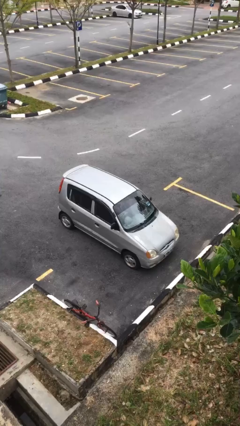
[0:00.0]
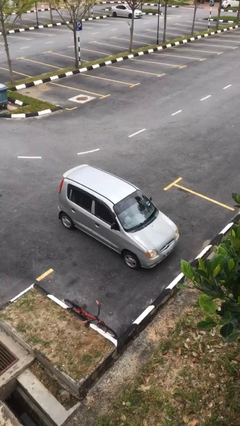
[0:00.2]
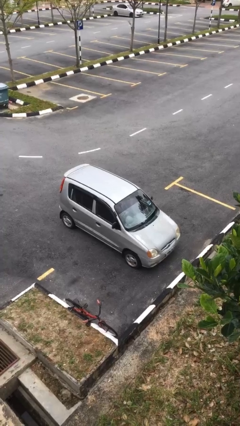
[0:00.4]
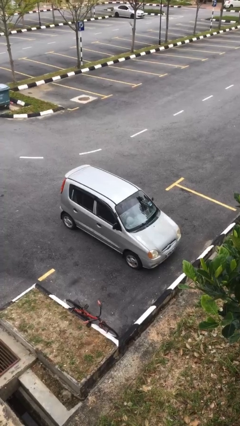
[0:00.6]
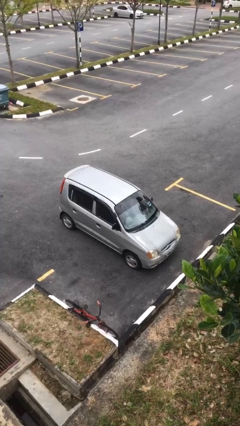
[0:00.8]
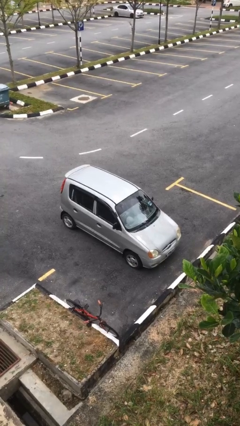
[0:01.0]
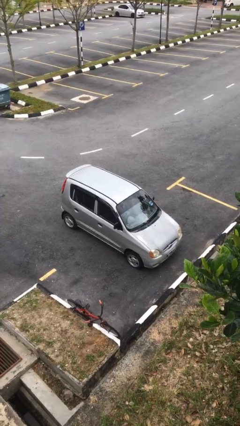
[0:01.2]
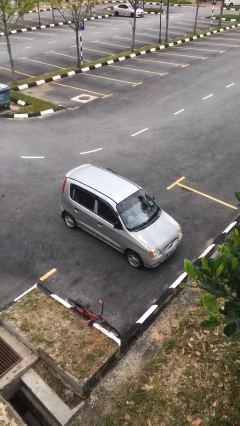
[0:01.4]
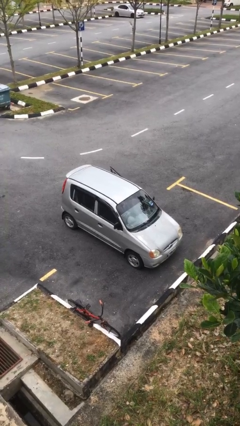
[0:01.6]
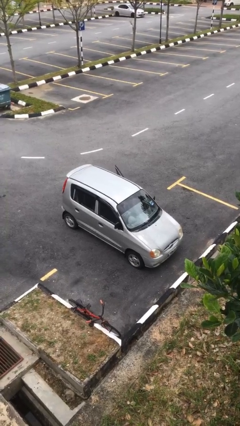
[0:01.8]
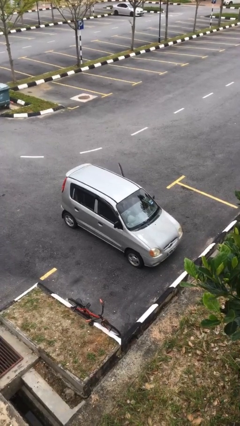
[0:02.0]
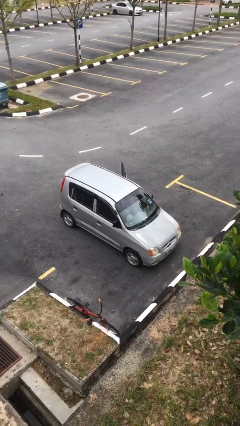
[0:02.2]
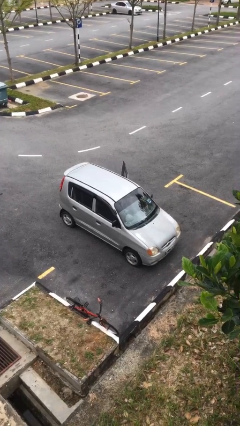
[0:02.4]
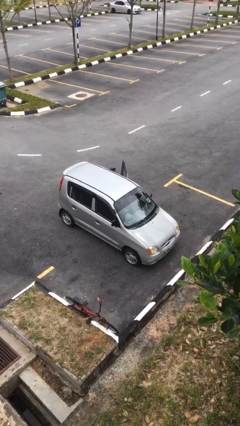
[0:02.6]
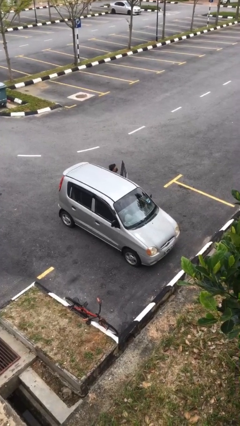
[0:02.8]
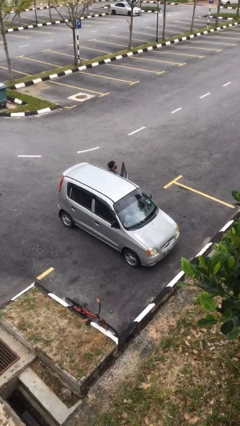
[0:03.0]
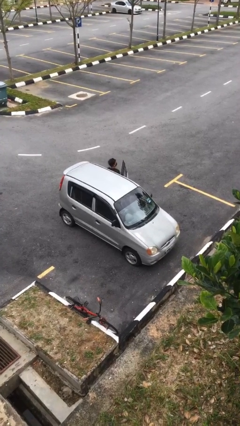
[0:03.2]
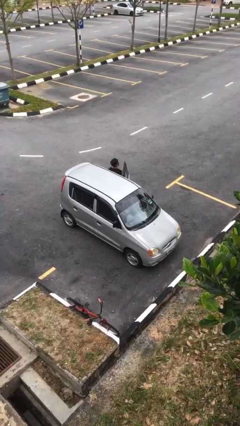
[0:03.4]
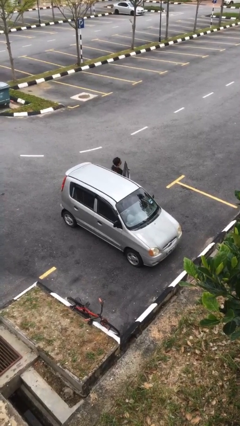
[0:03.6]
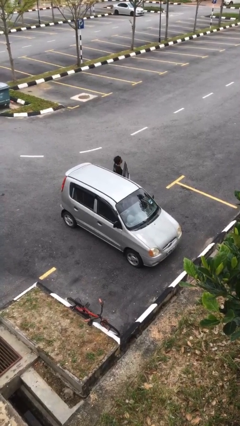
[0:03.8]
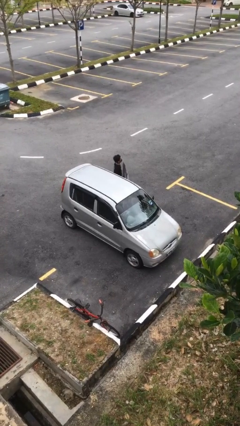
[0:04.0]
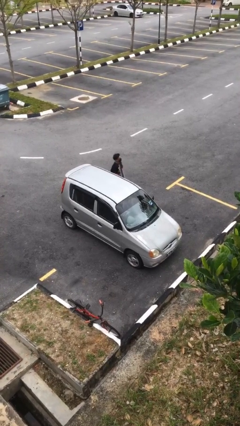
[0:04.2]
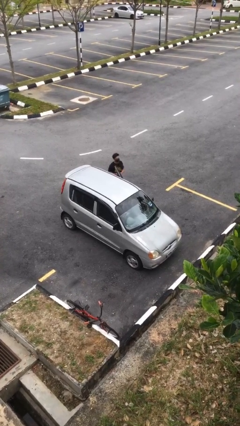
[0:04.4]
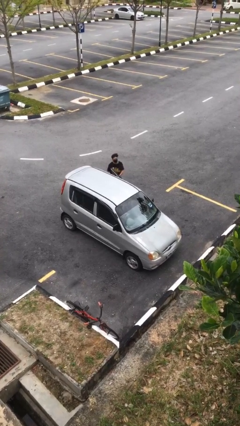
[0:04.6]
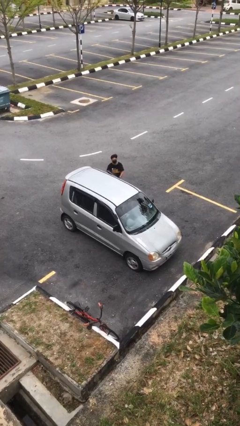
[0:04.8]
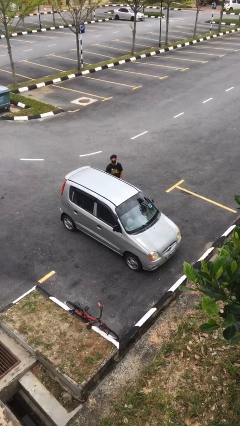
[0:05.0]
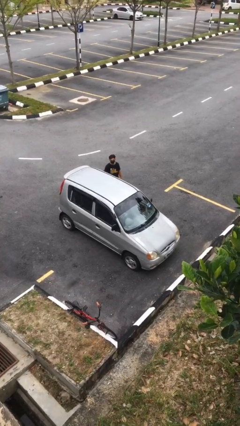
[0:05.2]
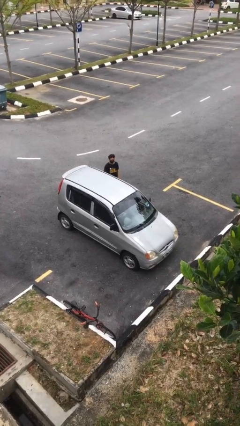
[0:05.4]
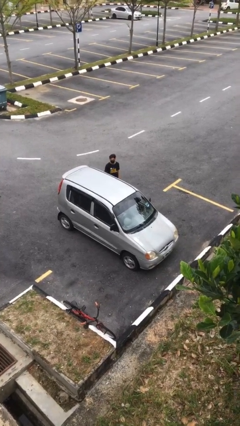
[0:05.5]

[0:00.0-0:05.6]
car drops off person

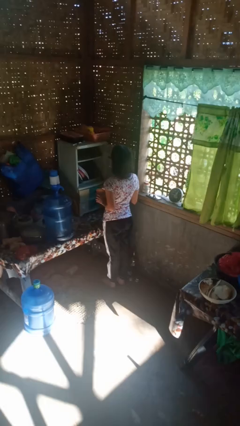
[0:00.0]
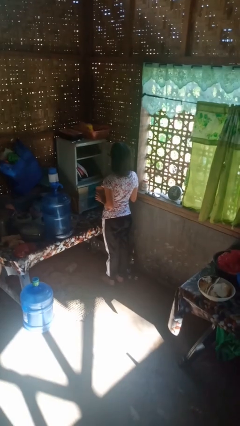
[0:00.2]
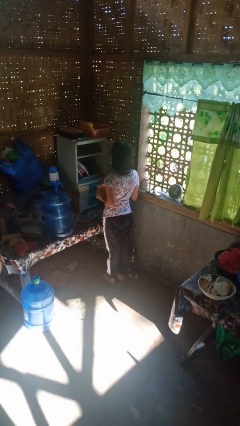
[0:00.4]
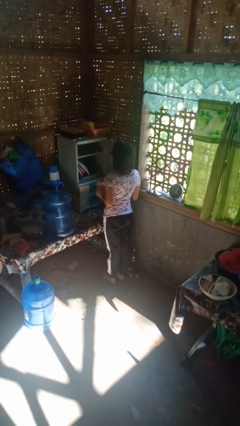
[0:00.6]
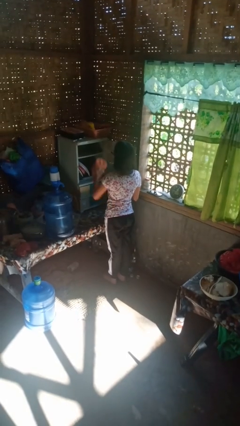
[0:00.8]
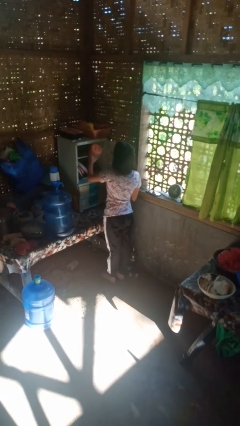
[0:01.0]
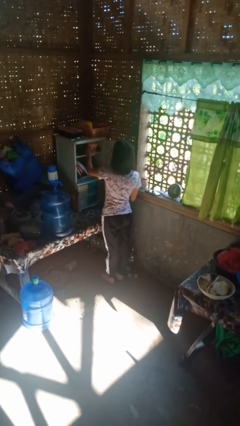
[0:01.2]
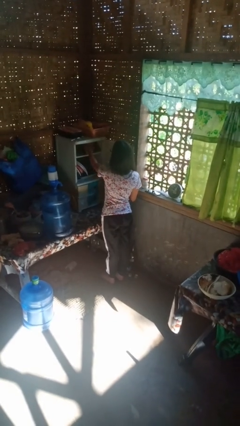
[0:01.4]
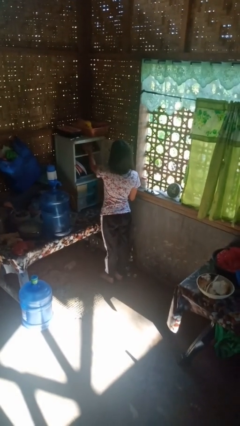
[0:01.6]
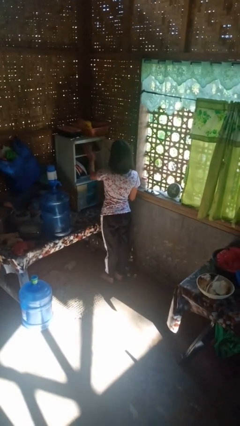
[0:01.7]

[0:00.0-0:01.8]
person puts down object into cabinet

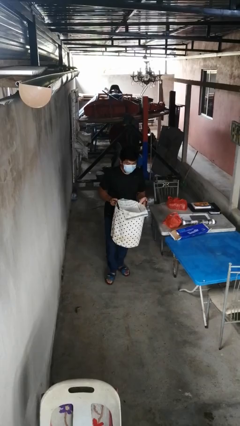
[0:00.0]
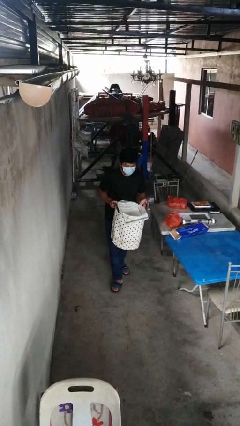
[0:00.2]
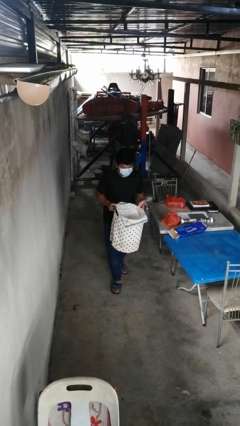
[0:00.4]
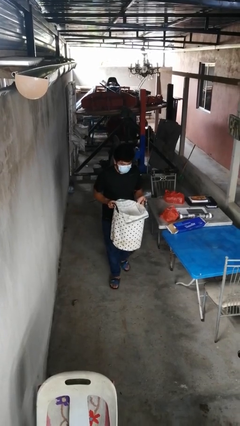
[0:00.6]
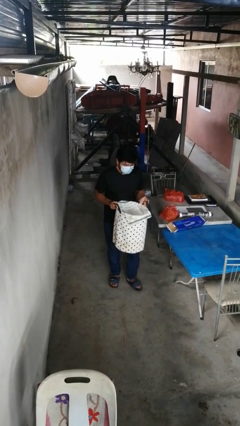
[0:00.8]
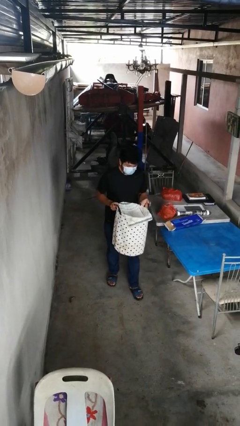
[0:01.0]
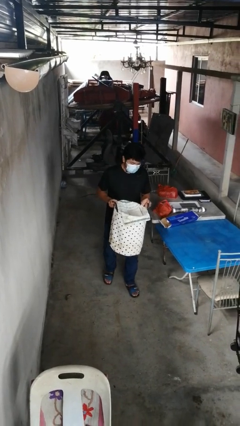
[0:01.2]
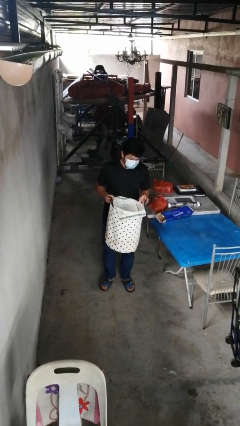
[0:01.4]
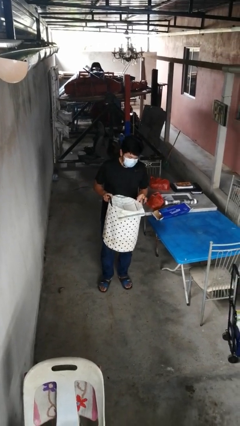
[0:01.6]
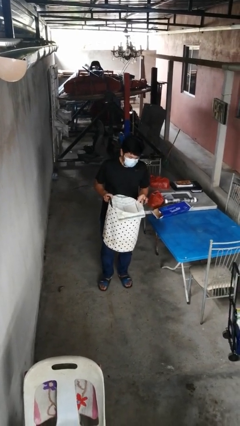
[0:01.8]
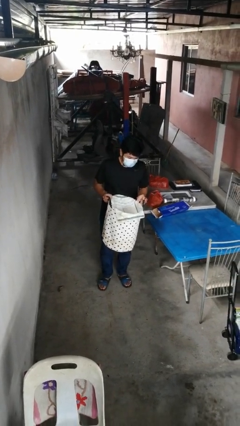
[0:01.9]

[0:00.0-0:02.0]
person carries laundry basket

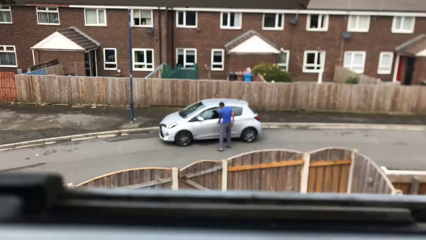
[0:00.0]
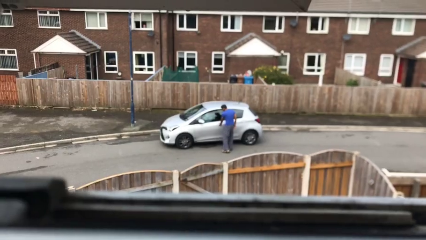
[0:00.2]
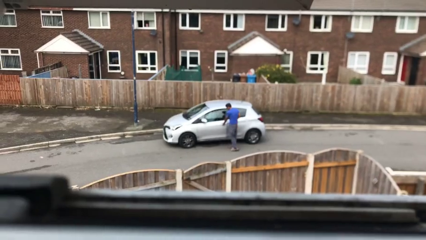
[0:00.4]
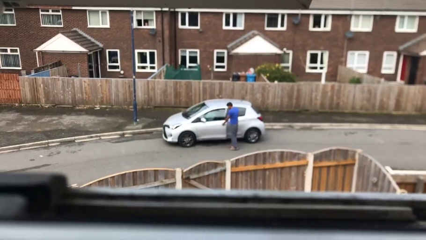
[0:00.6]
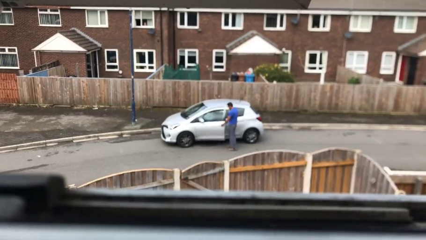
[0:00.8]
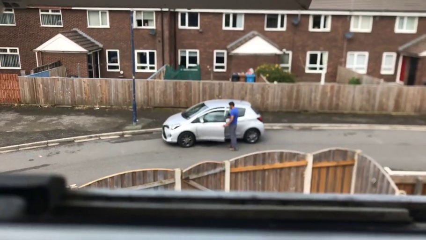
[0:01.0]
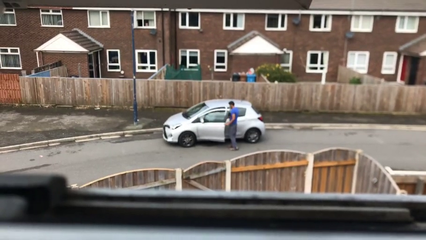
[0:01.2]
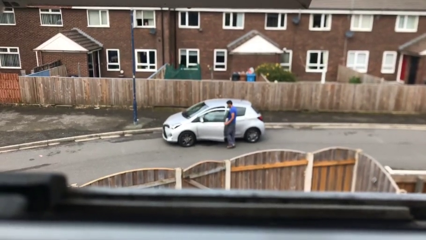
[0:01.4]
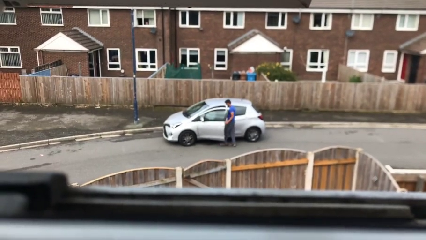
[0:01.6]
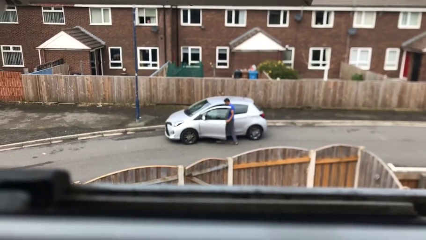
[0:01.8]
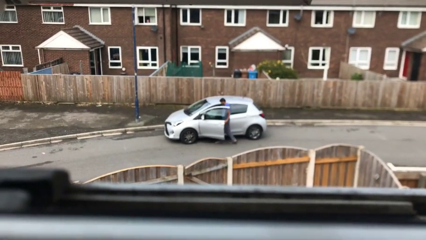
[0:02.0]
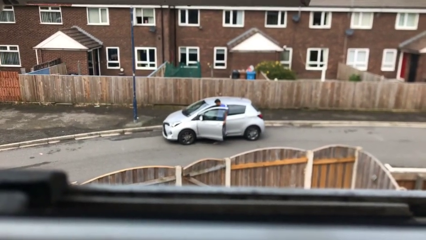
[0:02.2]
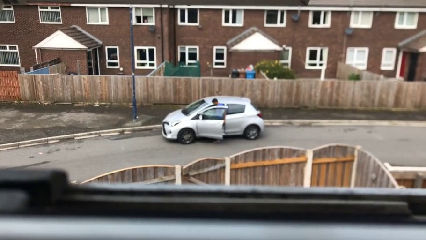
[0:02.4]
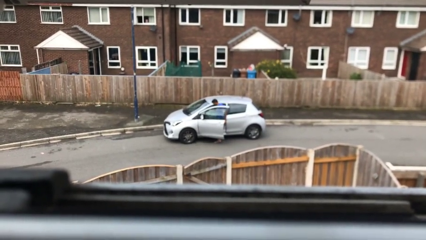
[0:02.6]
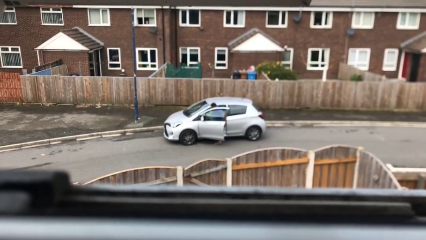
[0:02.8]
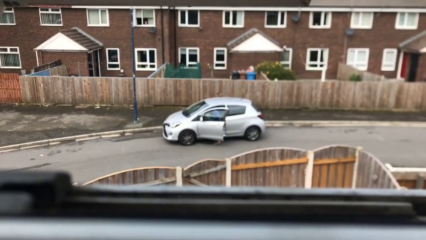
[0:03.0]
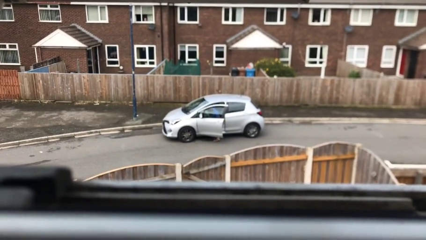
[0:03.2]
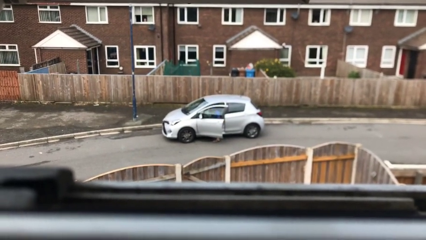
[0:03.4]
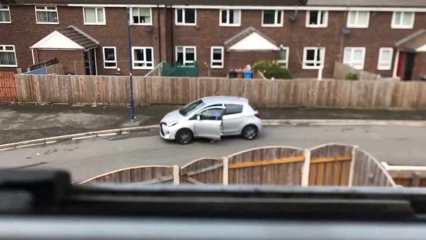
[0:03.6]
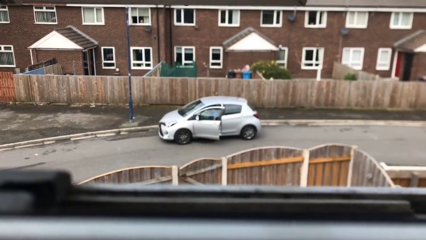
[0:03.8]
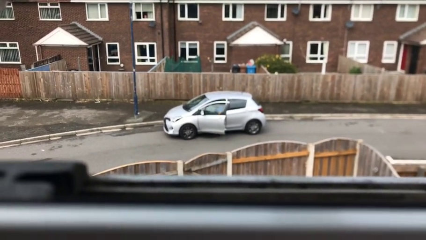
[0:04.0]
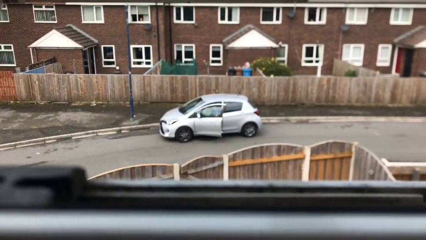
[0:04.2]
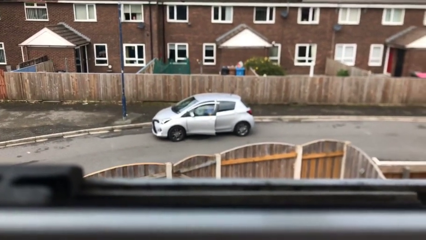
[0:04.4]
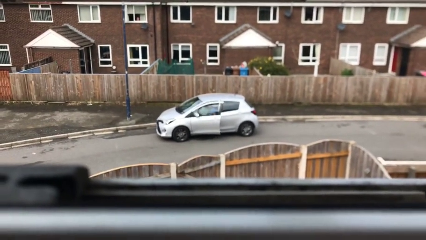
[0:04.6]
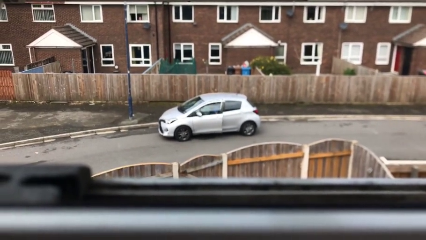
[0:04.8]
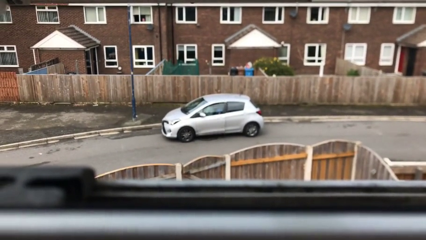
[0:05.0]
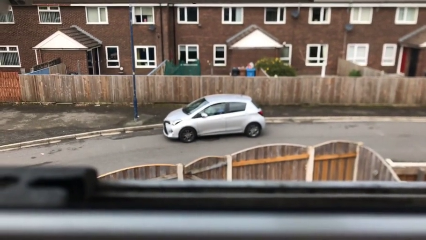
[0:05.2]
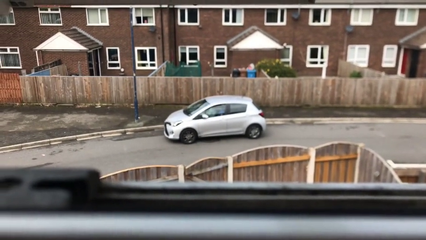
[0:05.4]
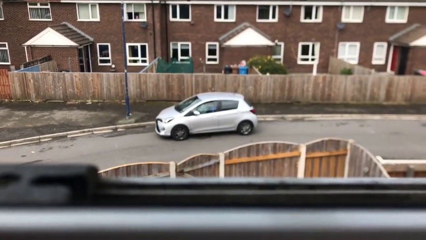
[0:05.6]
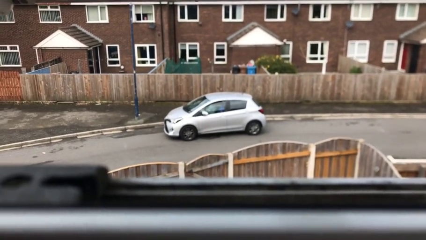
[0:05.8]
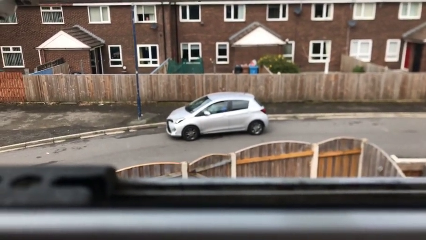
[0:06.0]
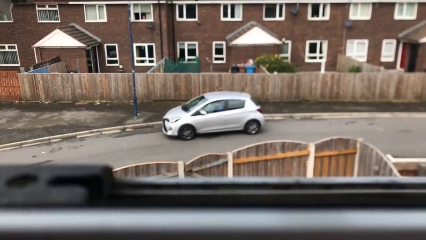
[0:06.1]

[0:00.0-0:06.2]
car picks up person

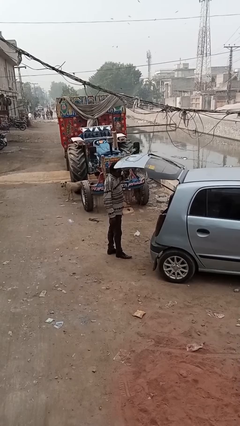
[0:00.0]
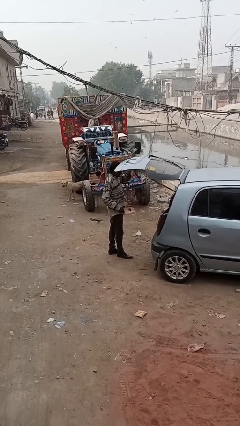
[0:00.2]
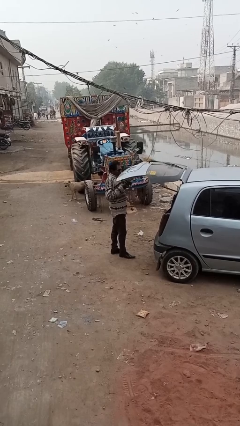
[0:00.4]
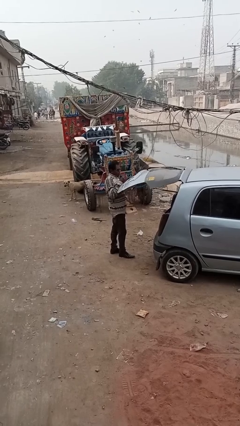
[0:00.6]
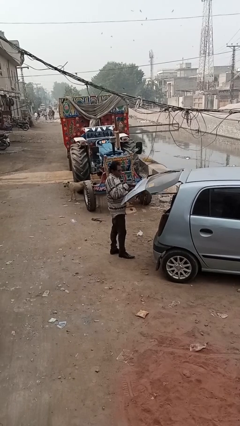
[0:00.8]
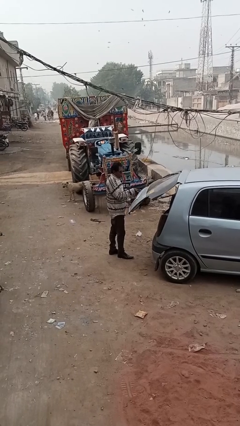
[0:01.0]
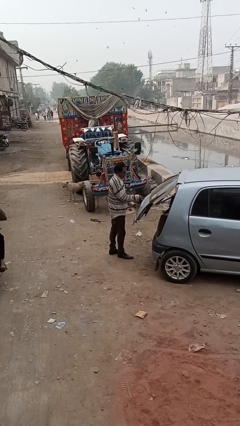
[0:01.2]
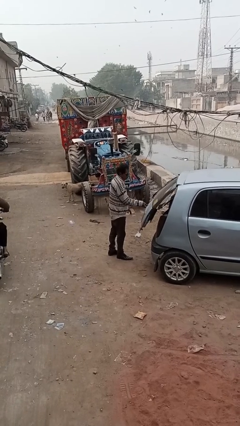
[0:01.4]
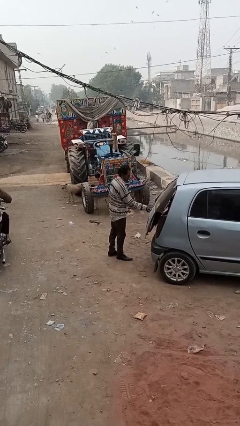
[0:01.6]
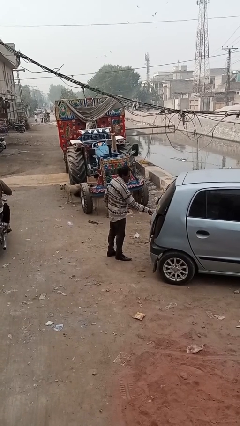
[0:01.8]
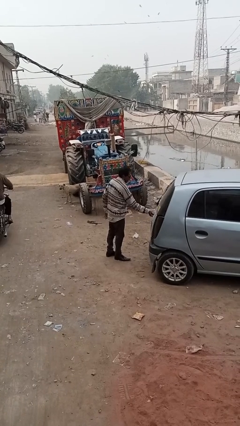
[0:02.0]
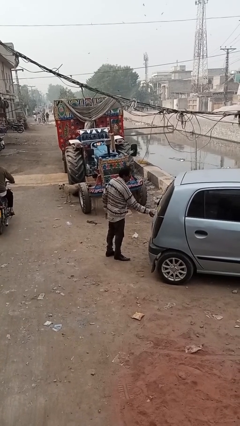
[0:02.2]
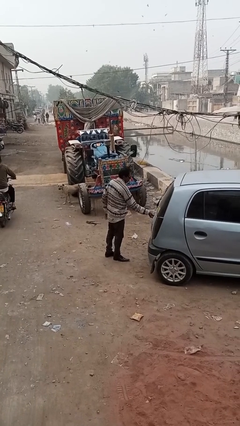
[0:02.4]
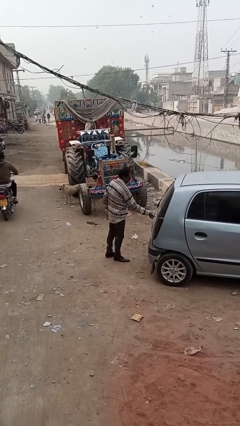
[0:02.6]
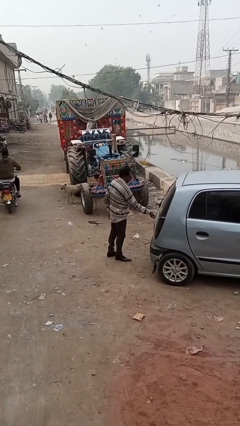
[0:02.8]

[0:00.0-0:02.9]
person closes car trunk
